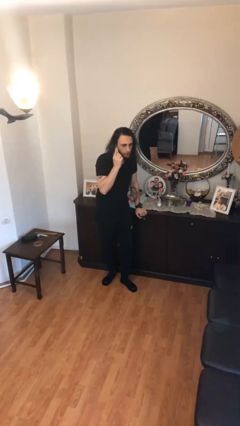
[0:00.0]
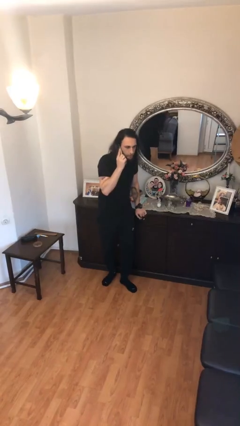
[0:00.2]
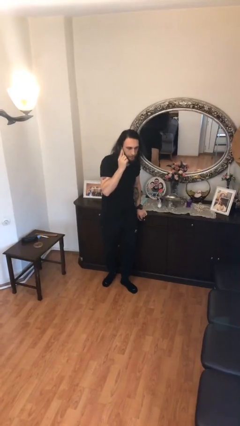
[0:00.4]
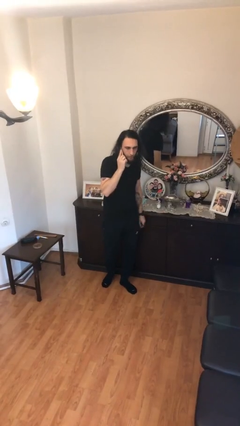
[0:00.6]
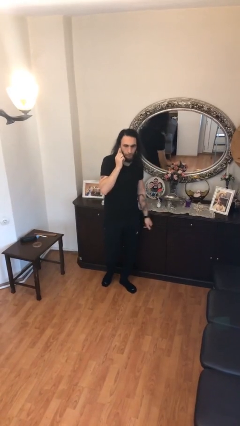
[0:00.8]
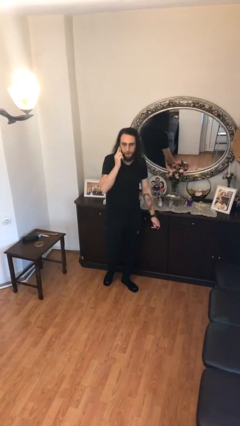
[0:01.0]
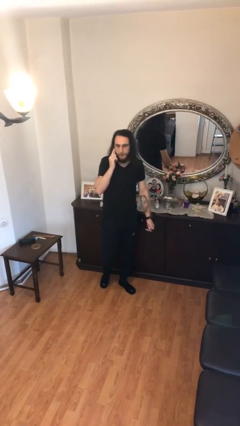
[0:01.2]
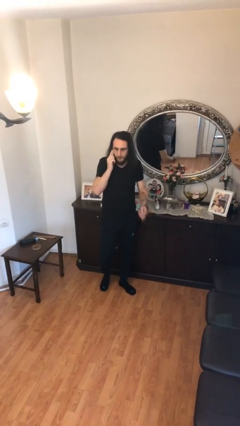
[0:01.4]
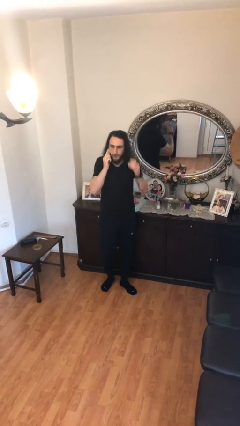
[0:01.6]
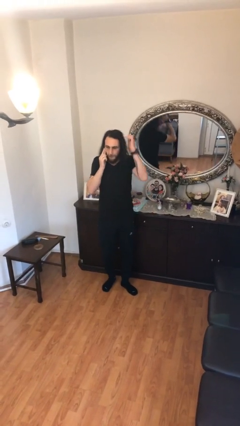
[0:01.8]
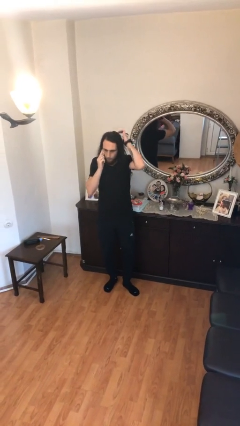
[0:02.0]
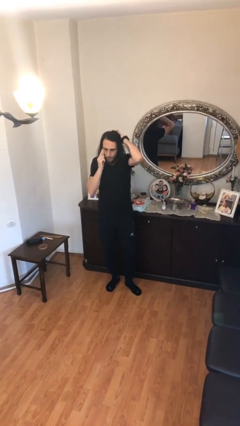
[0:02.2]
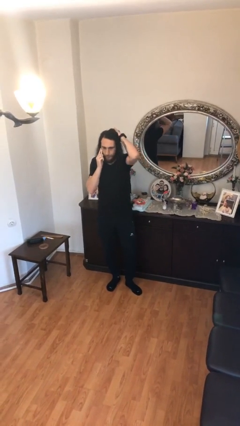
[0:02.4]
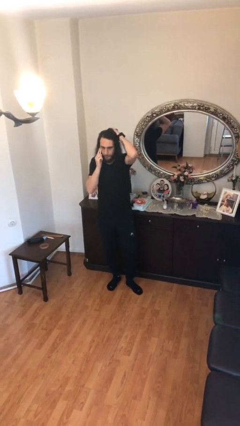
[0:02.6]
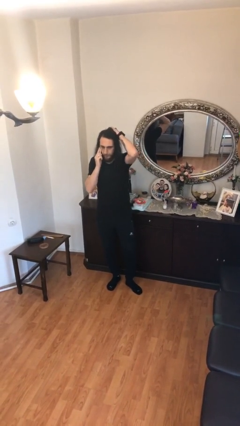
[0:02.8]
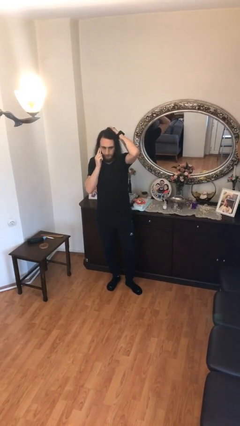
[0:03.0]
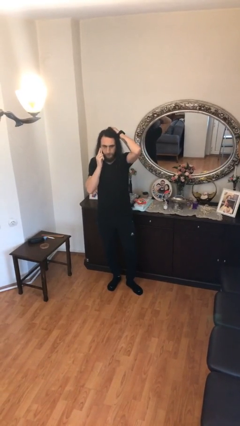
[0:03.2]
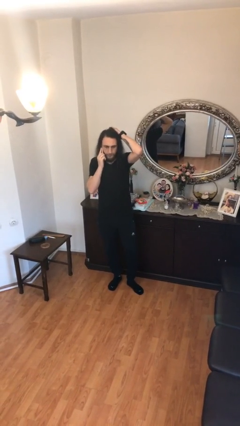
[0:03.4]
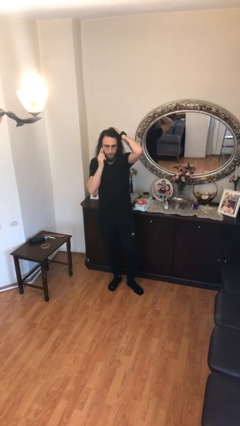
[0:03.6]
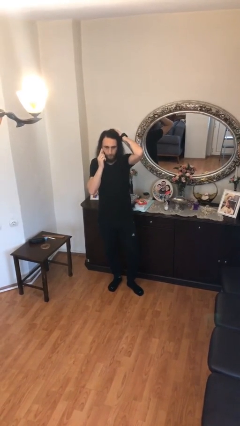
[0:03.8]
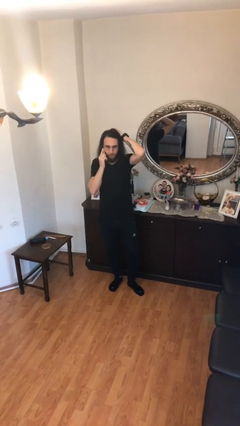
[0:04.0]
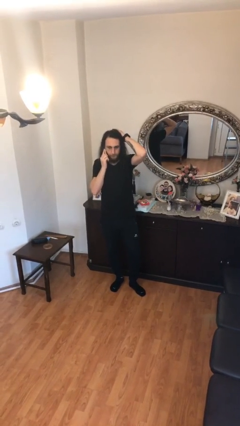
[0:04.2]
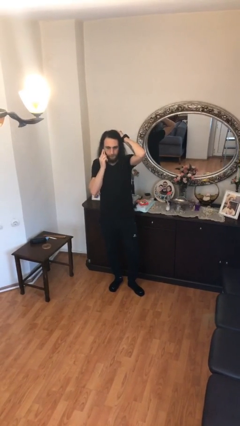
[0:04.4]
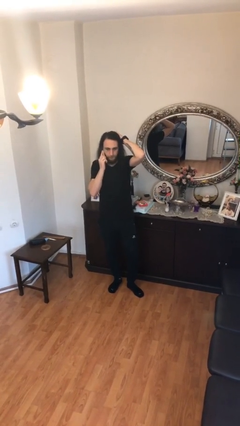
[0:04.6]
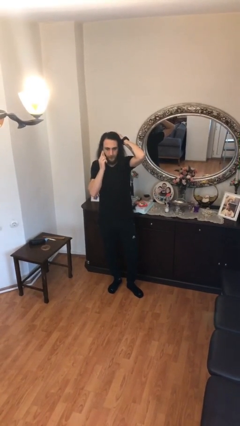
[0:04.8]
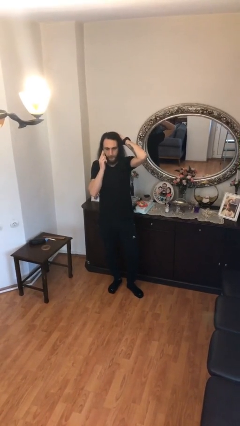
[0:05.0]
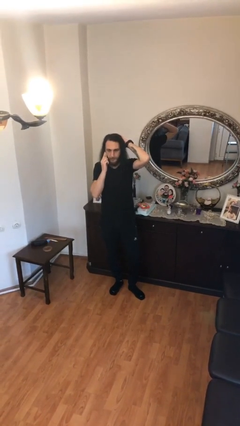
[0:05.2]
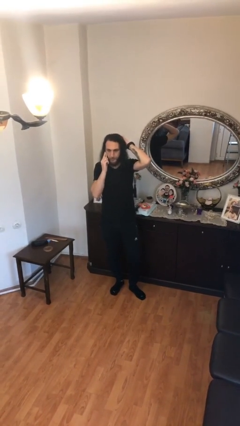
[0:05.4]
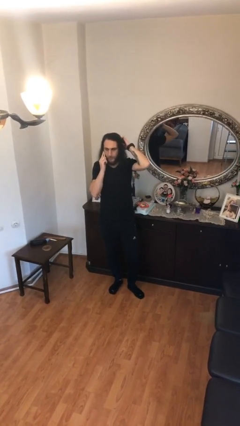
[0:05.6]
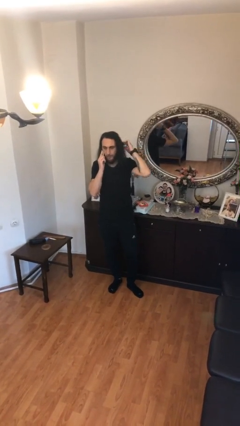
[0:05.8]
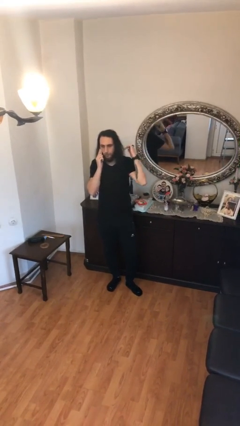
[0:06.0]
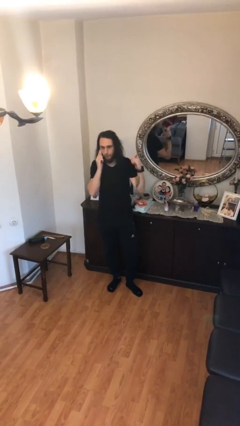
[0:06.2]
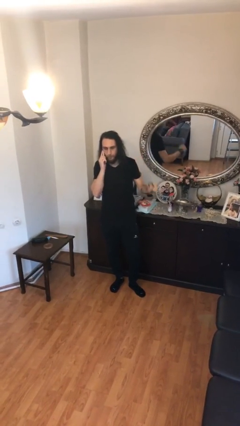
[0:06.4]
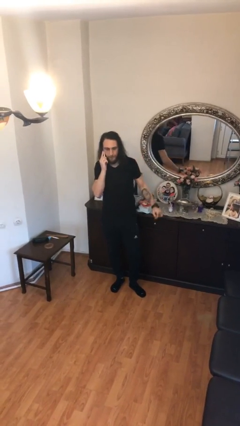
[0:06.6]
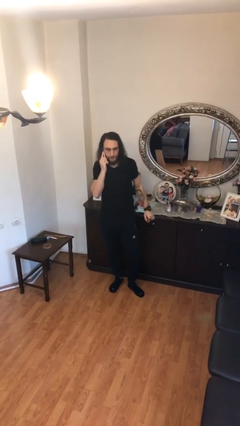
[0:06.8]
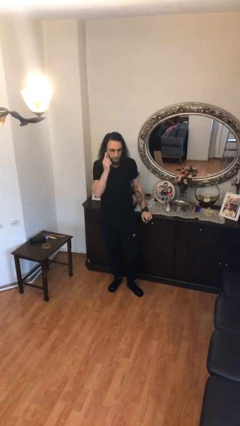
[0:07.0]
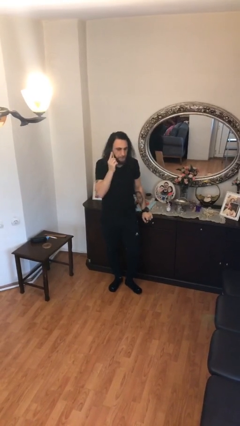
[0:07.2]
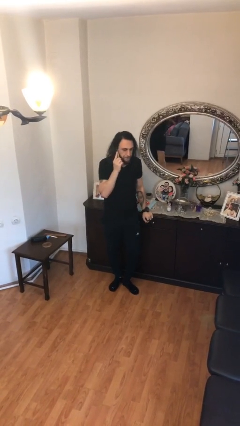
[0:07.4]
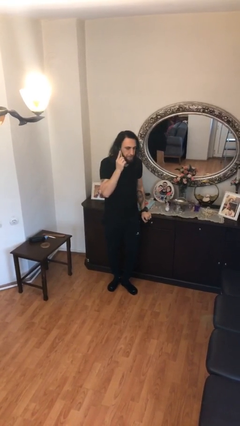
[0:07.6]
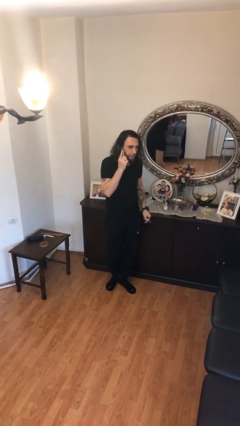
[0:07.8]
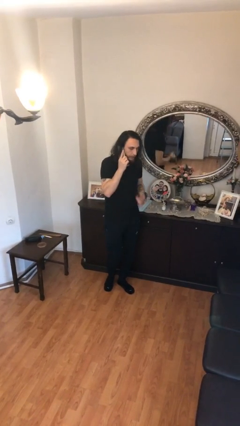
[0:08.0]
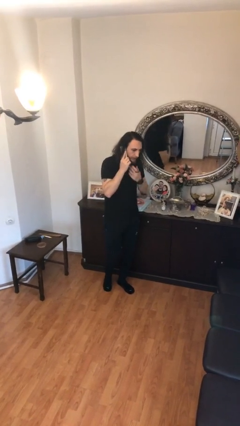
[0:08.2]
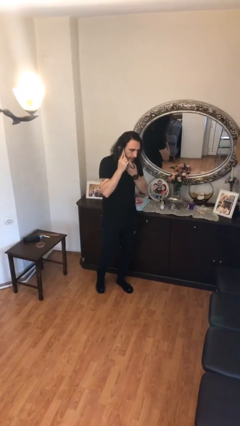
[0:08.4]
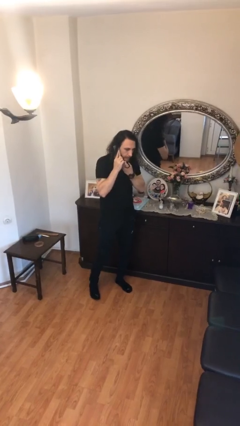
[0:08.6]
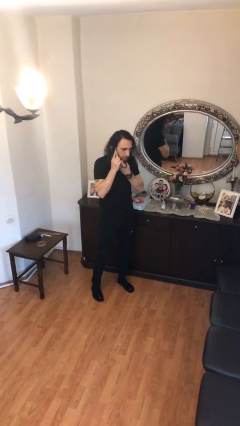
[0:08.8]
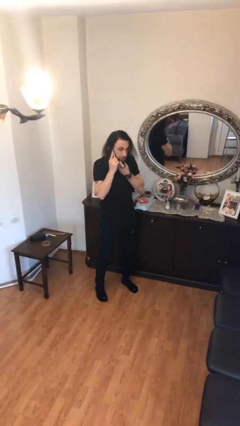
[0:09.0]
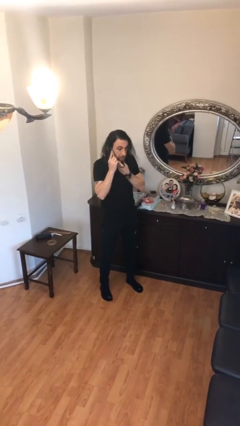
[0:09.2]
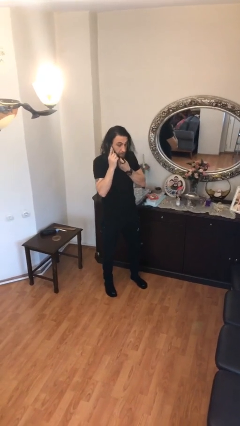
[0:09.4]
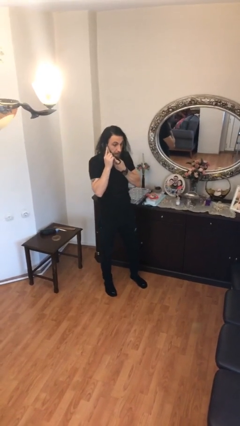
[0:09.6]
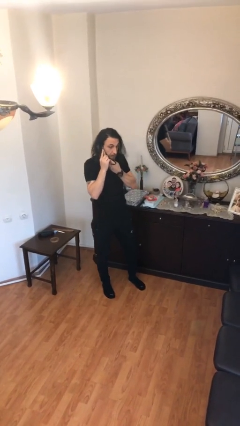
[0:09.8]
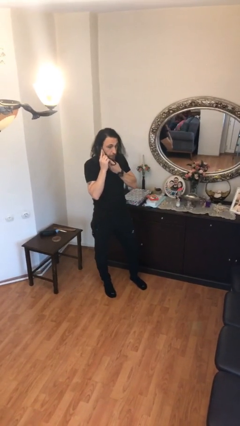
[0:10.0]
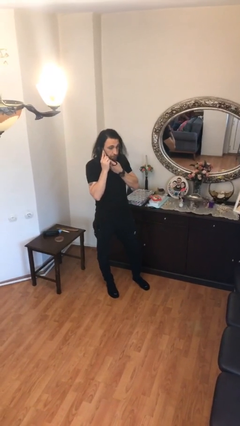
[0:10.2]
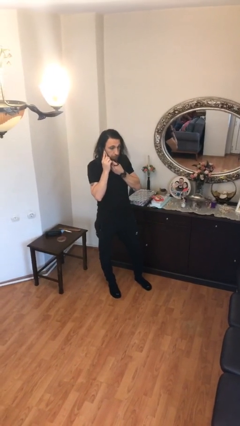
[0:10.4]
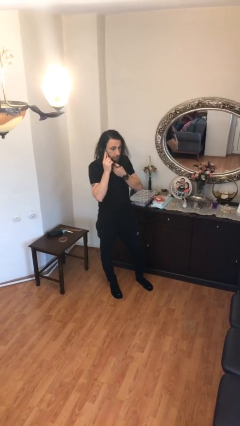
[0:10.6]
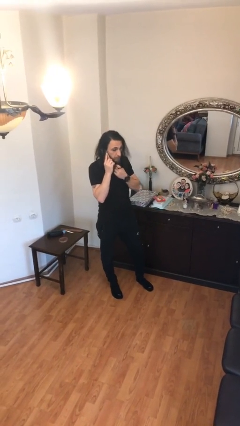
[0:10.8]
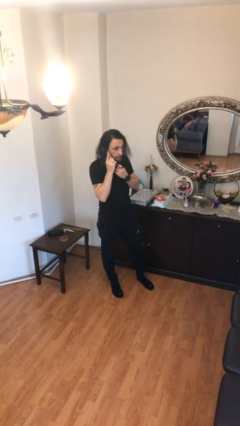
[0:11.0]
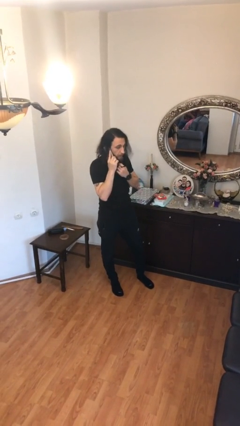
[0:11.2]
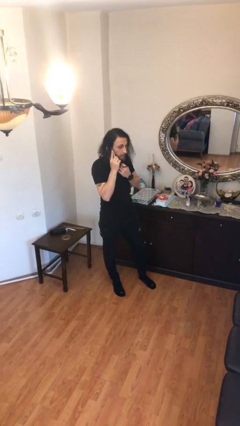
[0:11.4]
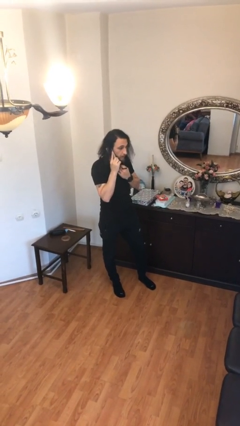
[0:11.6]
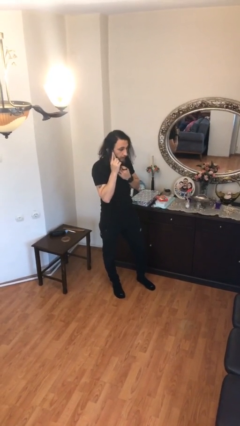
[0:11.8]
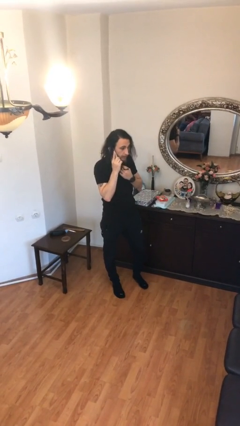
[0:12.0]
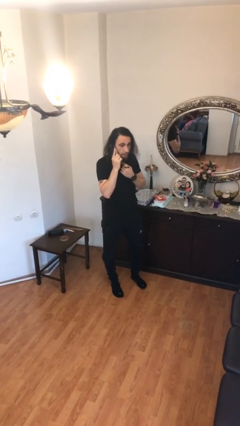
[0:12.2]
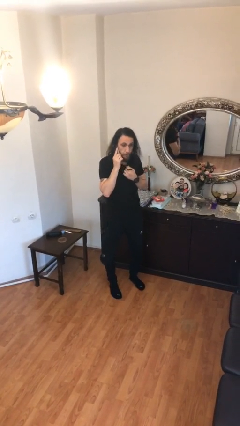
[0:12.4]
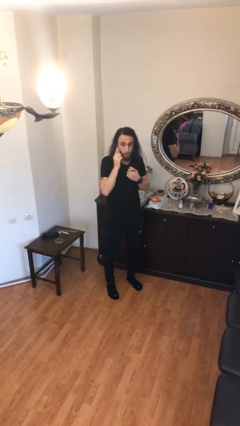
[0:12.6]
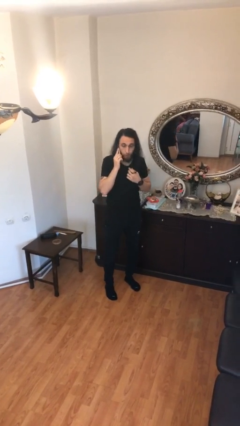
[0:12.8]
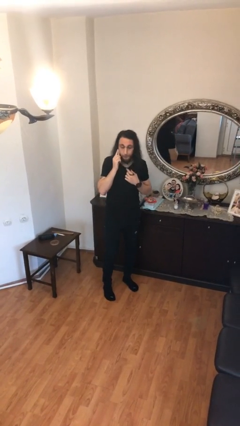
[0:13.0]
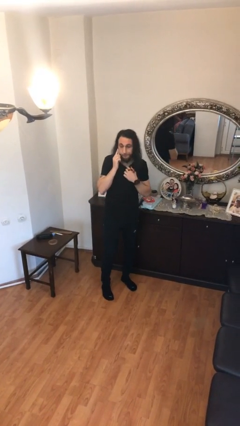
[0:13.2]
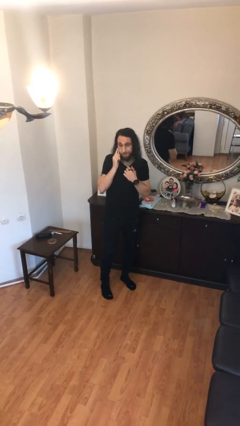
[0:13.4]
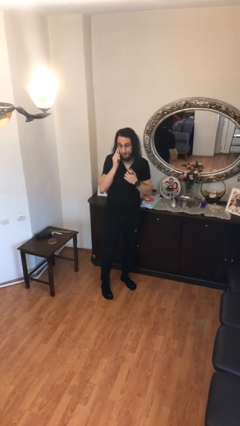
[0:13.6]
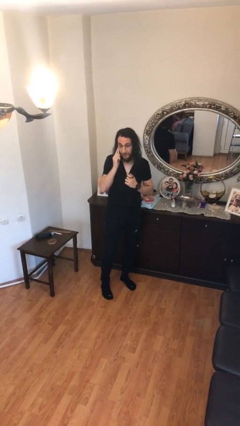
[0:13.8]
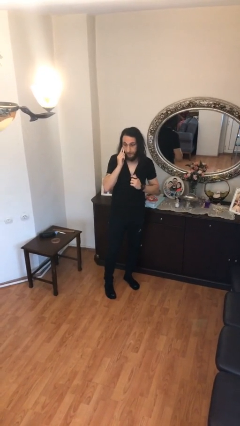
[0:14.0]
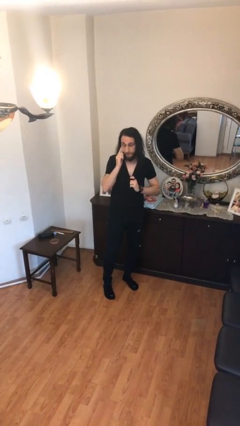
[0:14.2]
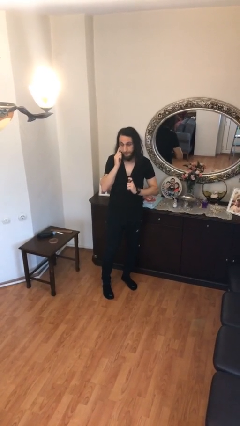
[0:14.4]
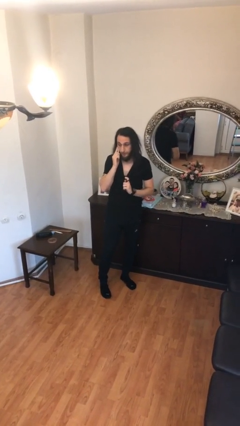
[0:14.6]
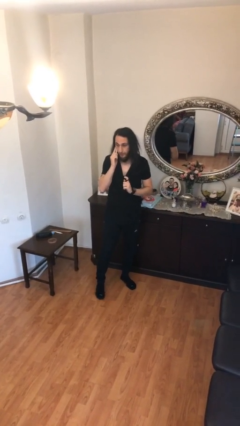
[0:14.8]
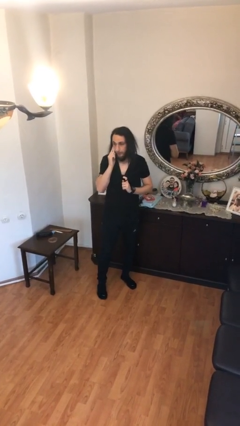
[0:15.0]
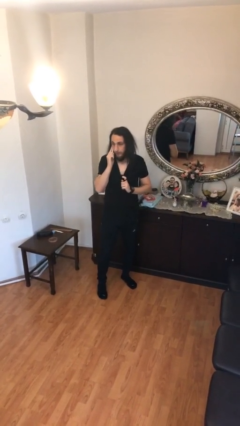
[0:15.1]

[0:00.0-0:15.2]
person talks on phone
